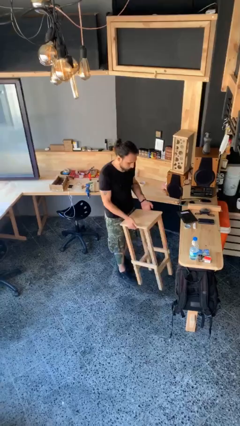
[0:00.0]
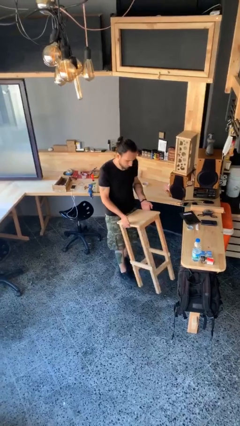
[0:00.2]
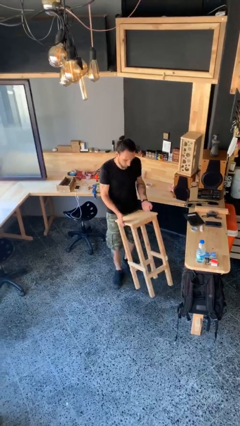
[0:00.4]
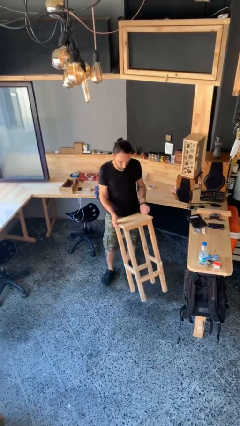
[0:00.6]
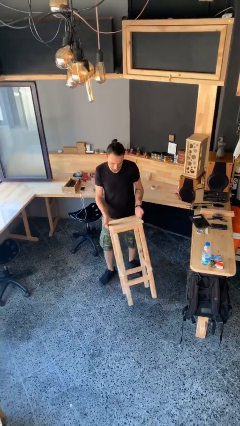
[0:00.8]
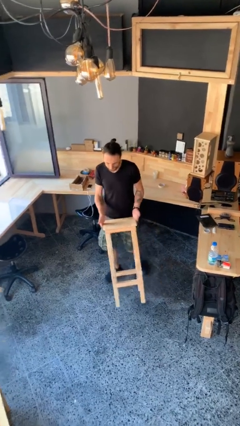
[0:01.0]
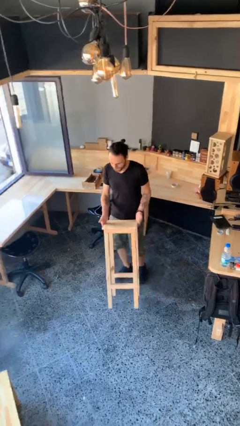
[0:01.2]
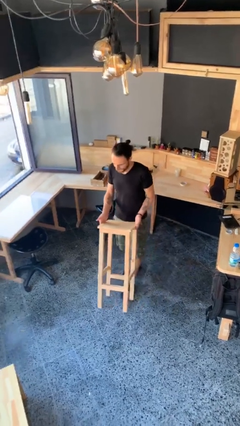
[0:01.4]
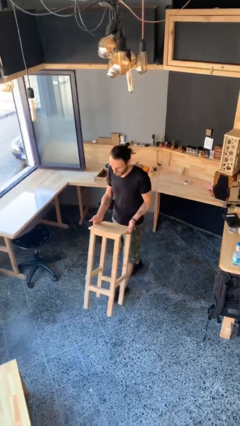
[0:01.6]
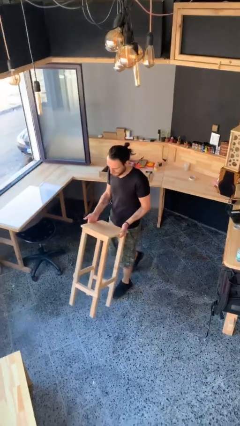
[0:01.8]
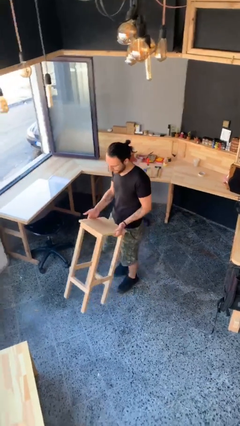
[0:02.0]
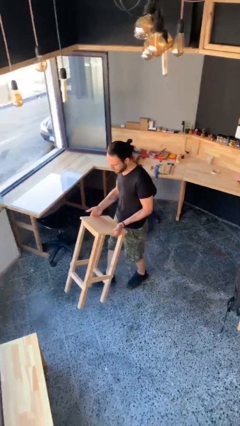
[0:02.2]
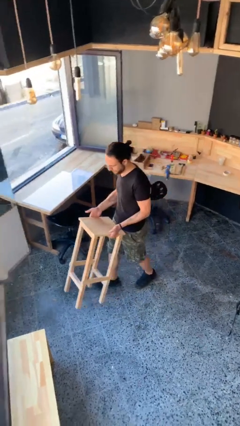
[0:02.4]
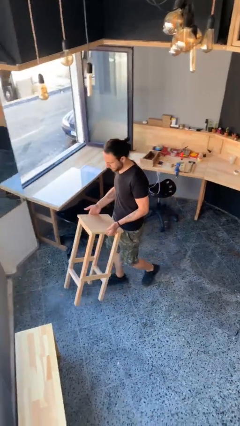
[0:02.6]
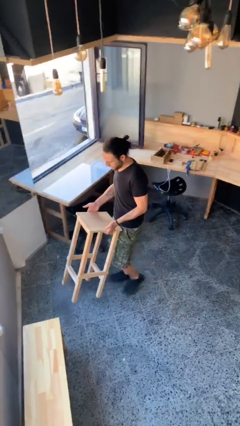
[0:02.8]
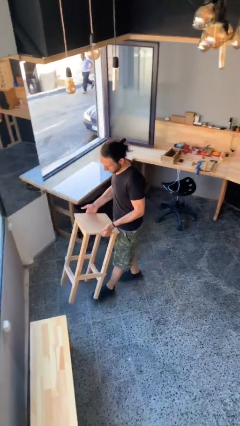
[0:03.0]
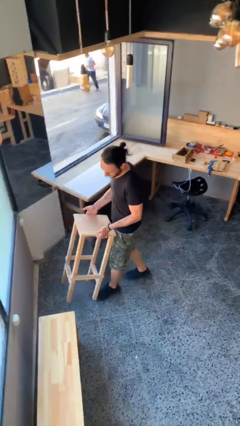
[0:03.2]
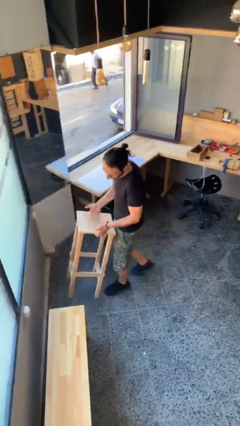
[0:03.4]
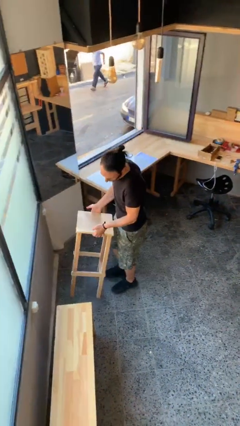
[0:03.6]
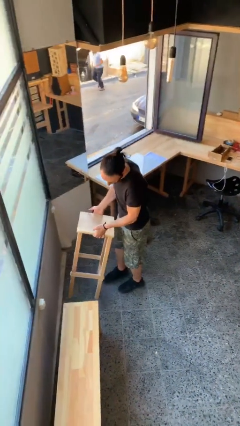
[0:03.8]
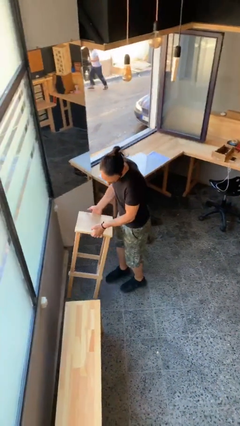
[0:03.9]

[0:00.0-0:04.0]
person carries heavy object

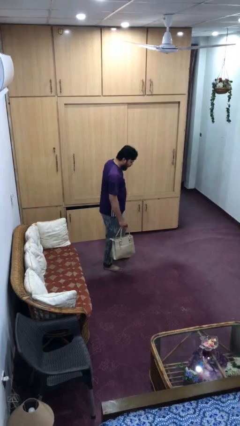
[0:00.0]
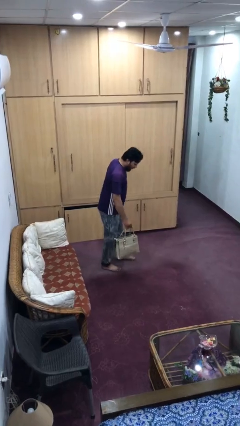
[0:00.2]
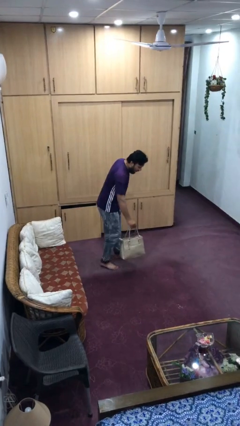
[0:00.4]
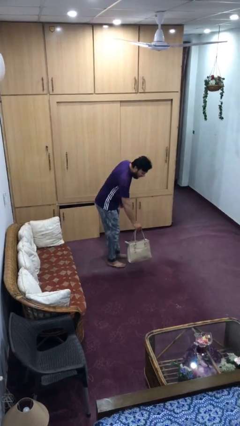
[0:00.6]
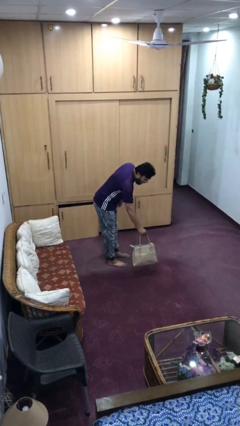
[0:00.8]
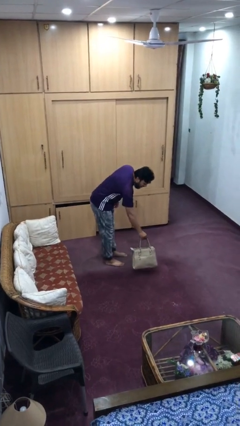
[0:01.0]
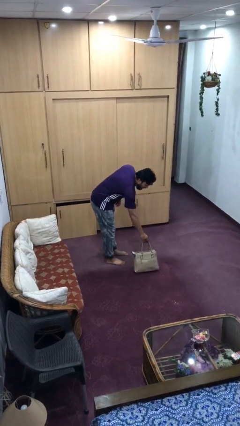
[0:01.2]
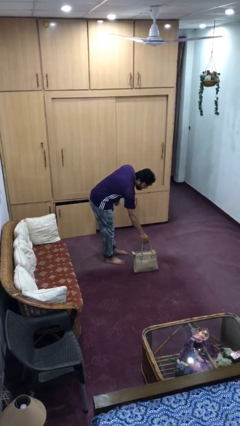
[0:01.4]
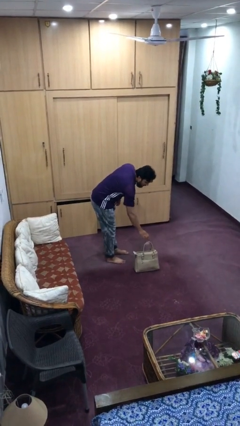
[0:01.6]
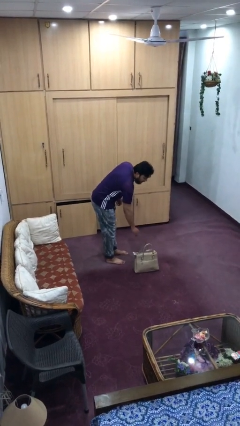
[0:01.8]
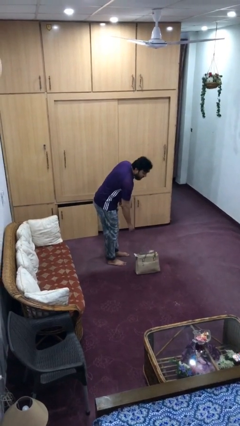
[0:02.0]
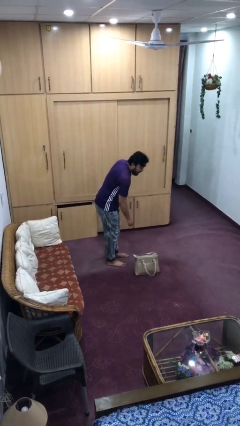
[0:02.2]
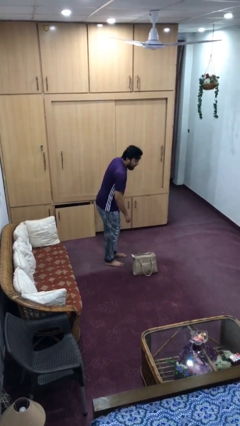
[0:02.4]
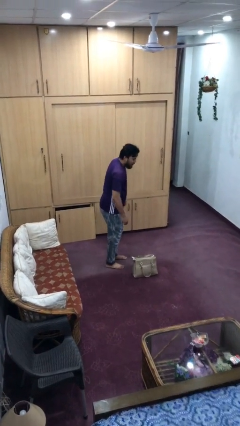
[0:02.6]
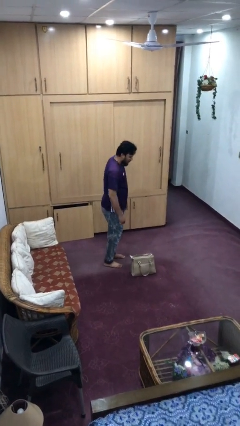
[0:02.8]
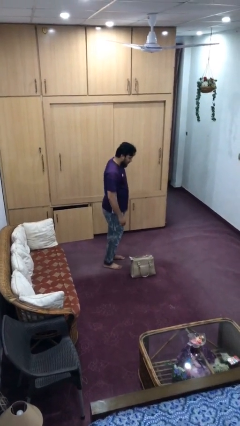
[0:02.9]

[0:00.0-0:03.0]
person puts down object on floor

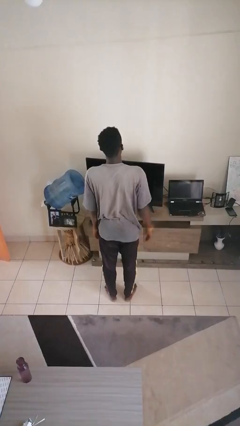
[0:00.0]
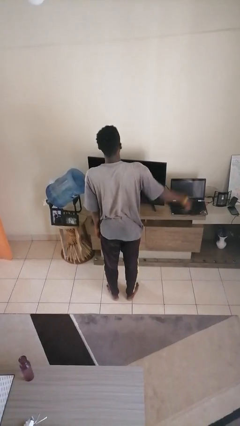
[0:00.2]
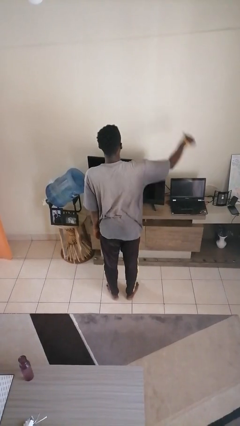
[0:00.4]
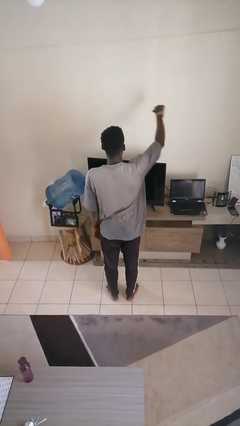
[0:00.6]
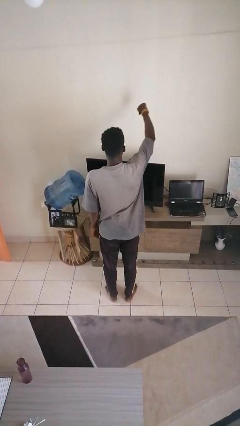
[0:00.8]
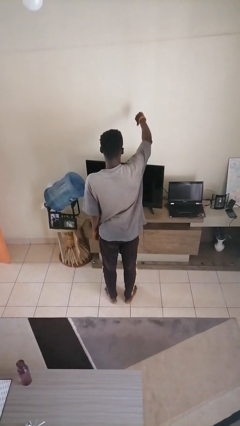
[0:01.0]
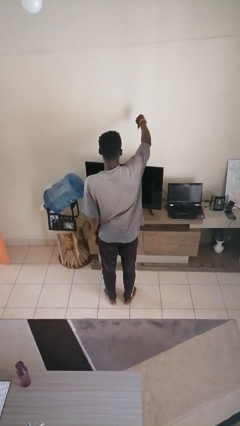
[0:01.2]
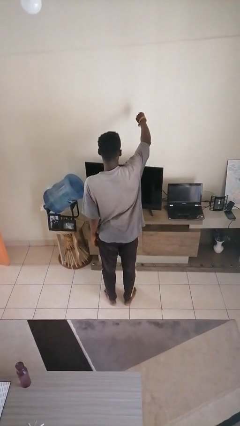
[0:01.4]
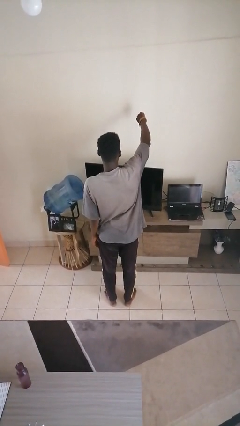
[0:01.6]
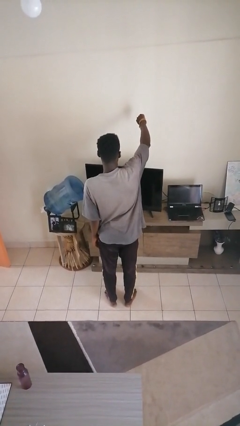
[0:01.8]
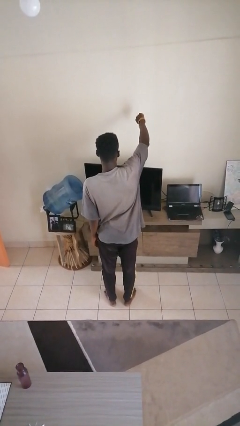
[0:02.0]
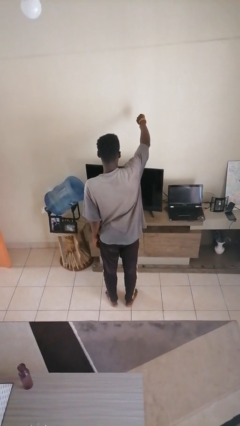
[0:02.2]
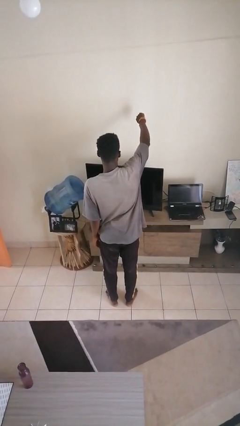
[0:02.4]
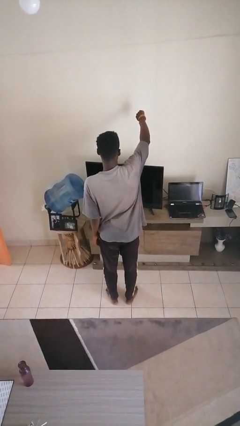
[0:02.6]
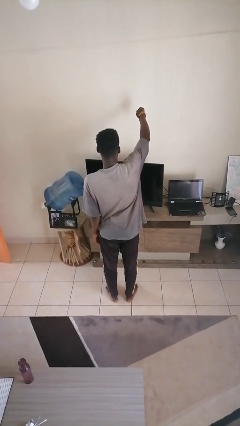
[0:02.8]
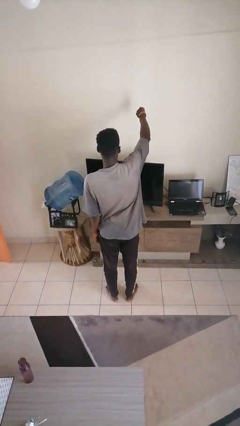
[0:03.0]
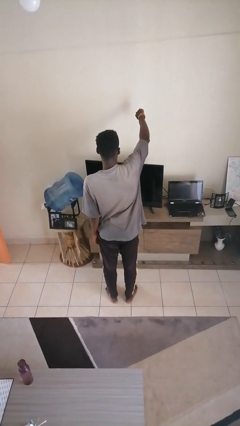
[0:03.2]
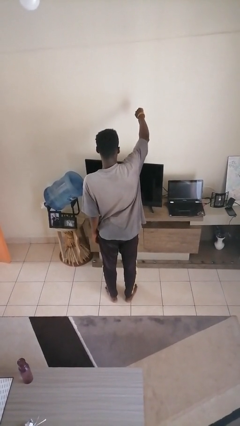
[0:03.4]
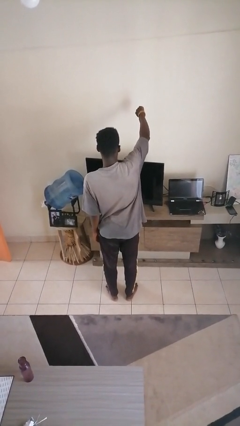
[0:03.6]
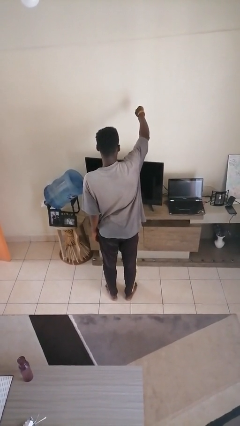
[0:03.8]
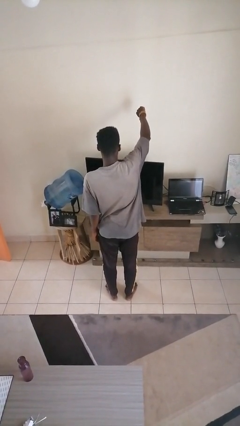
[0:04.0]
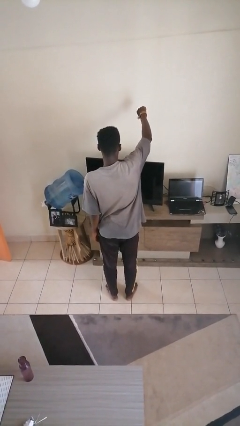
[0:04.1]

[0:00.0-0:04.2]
person gestures thumbs down

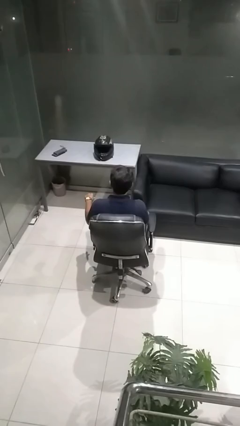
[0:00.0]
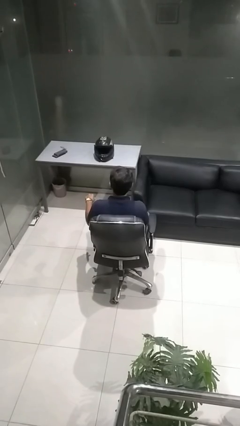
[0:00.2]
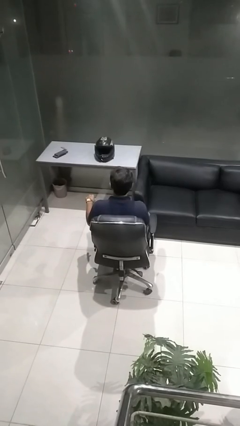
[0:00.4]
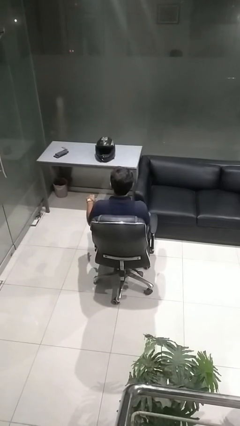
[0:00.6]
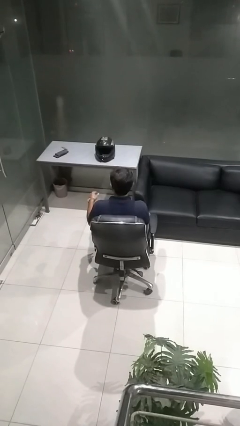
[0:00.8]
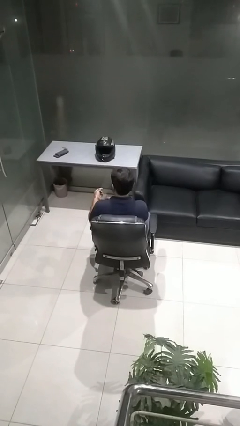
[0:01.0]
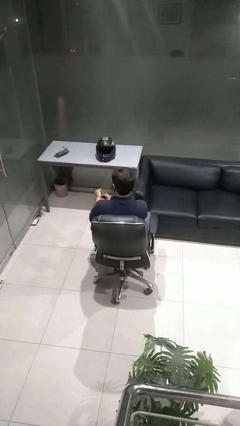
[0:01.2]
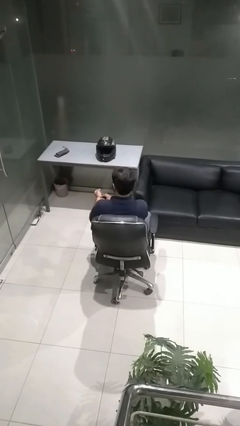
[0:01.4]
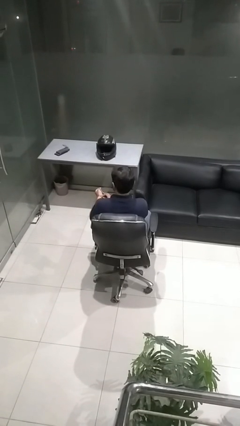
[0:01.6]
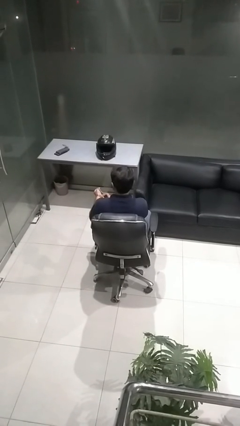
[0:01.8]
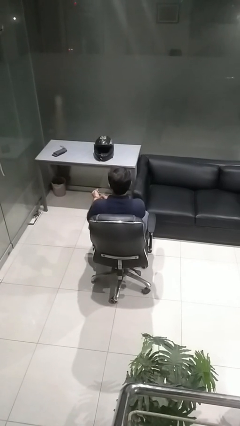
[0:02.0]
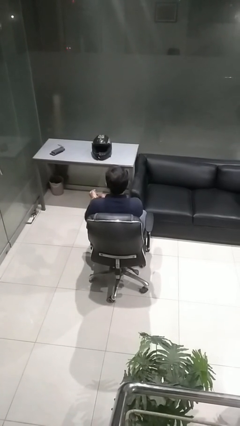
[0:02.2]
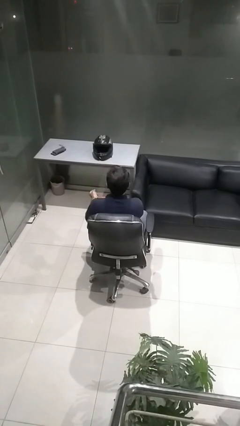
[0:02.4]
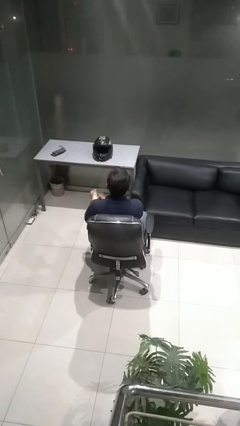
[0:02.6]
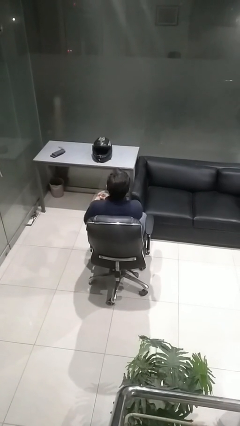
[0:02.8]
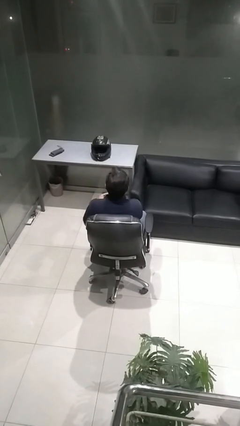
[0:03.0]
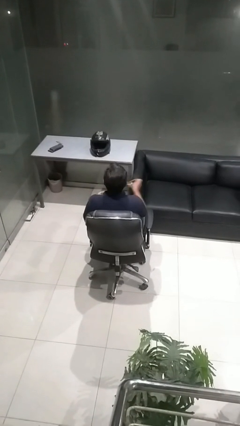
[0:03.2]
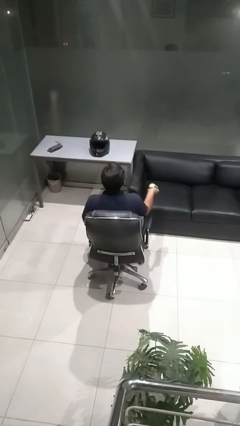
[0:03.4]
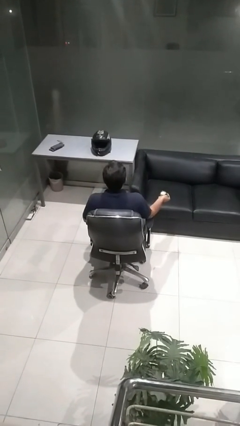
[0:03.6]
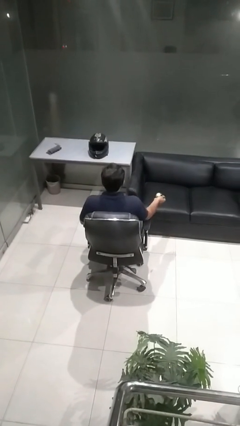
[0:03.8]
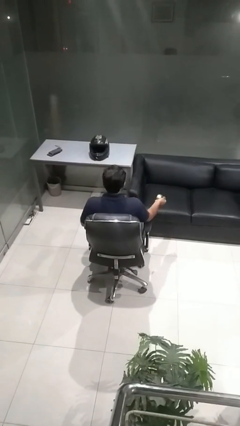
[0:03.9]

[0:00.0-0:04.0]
person takes off wristwatch

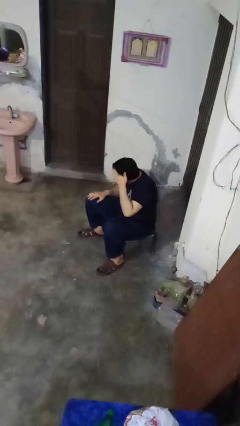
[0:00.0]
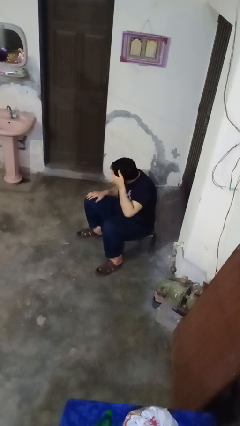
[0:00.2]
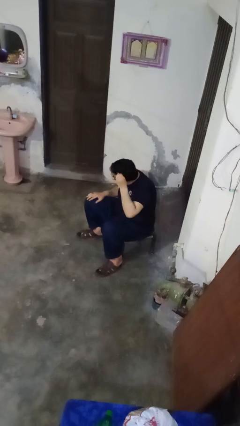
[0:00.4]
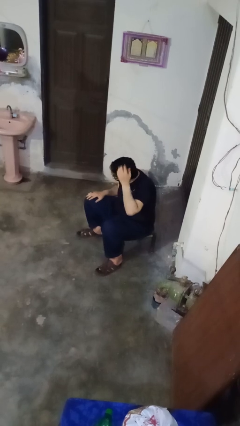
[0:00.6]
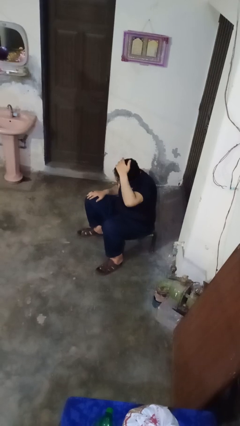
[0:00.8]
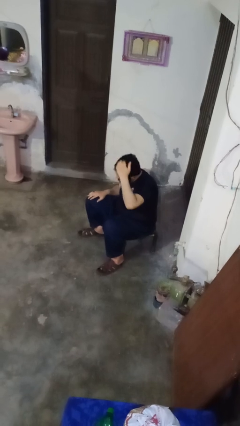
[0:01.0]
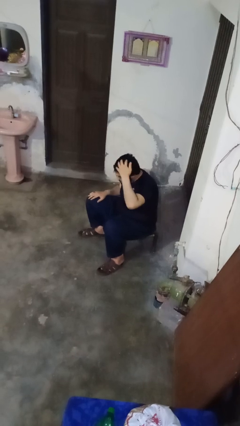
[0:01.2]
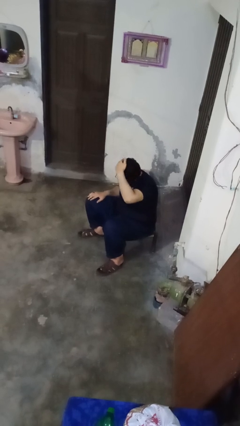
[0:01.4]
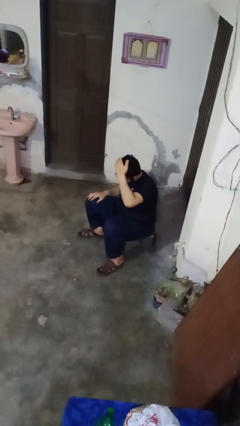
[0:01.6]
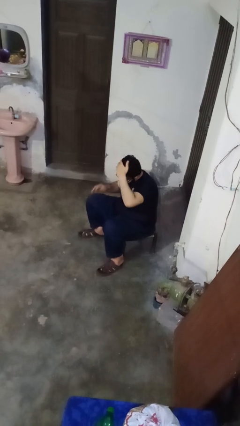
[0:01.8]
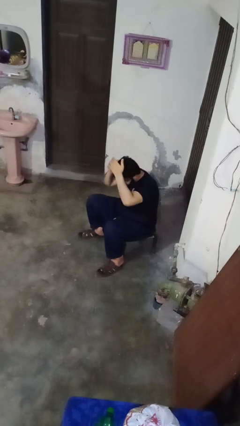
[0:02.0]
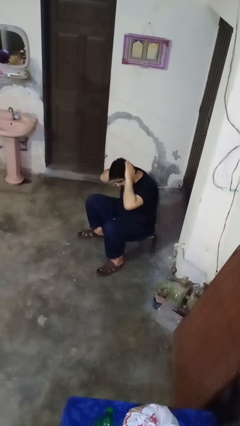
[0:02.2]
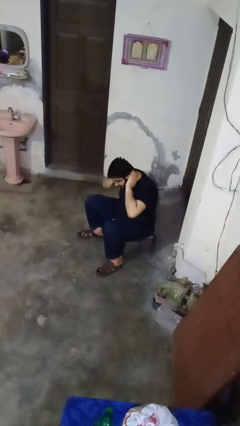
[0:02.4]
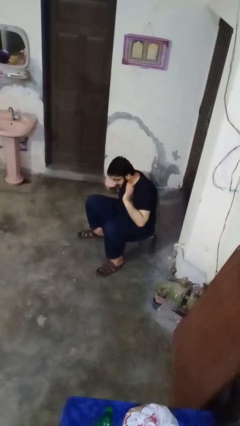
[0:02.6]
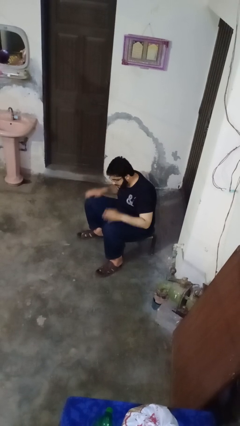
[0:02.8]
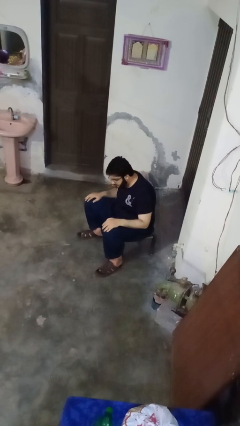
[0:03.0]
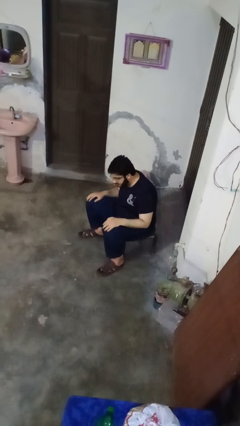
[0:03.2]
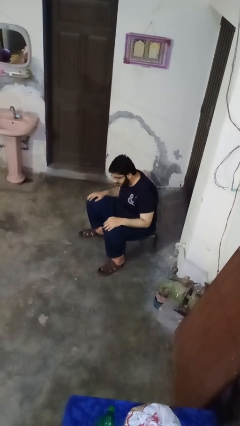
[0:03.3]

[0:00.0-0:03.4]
person strokes hair
